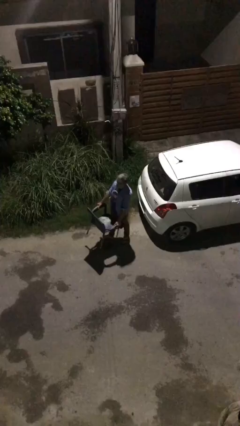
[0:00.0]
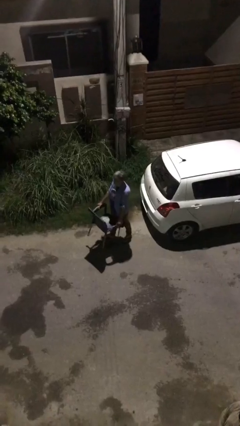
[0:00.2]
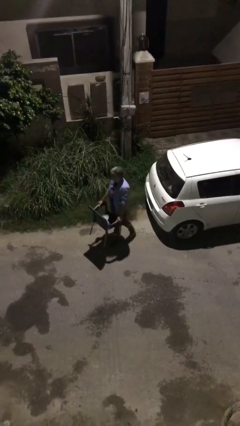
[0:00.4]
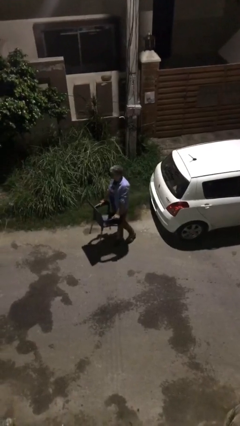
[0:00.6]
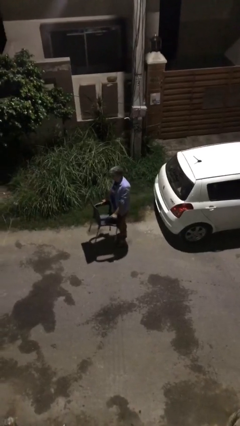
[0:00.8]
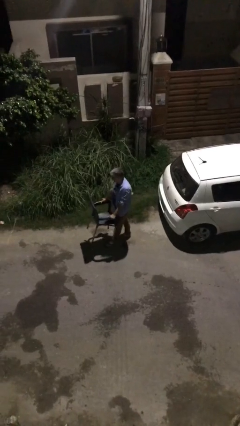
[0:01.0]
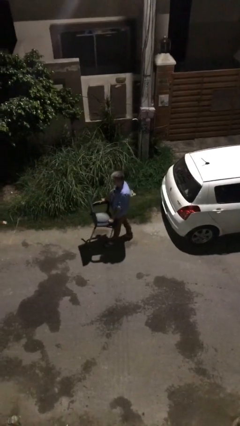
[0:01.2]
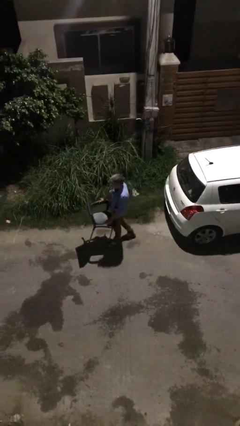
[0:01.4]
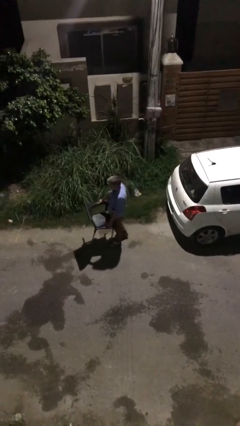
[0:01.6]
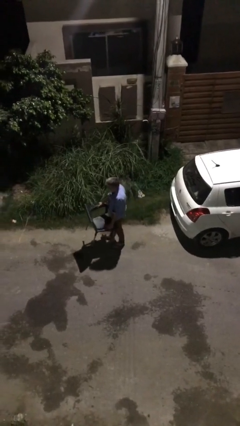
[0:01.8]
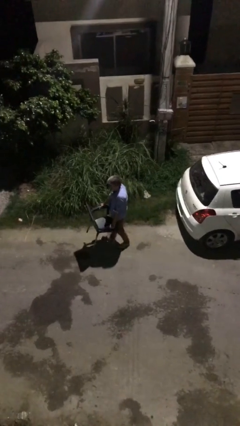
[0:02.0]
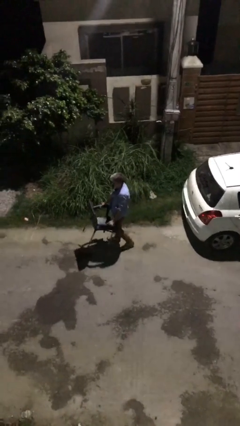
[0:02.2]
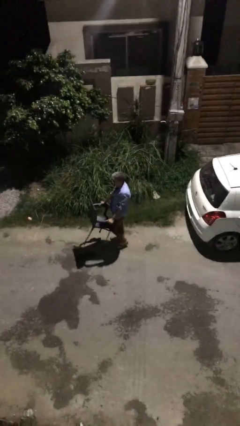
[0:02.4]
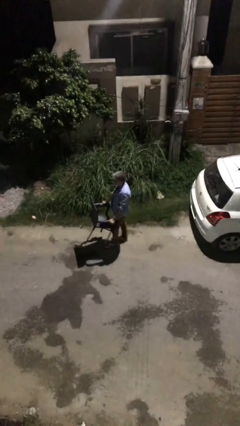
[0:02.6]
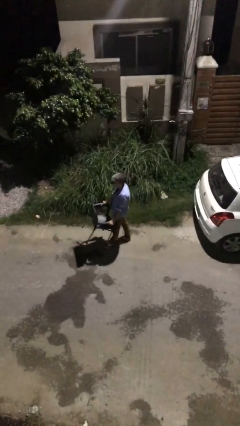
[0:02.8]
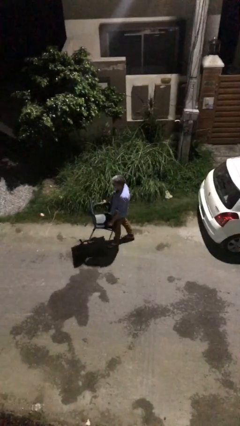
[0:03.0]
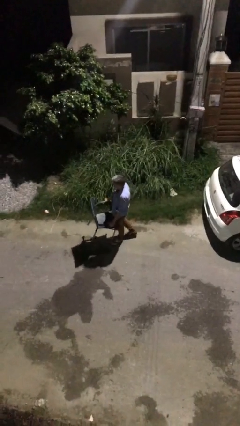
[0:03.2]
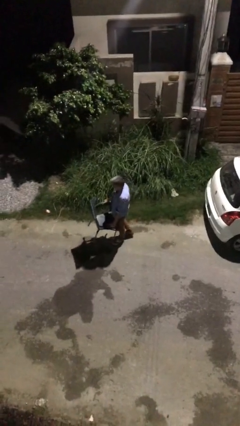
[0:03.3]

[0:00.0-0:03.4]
person carries heavy object

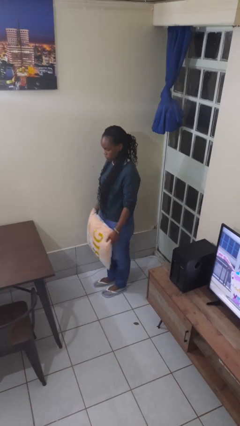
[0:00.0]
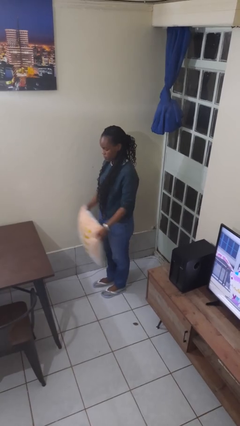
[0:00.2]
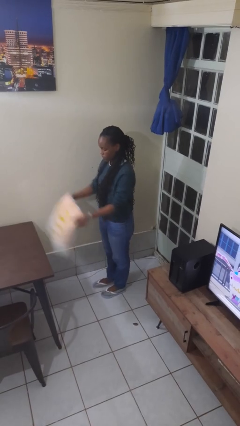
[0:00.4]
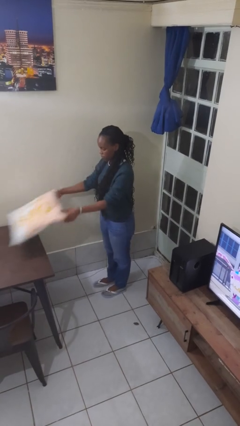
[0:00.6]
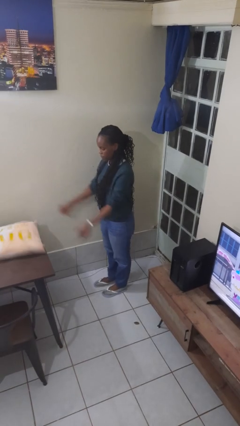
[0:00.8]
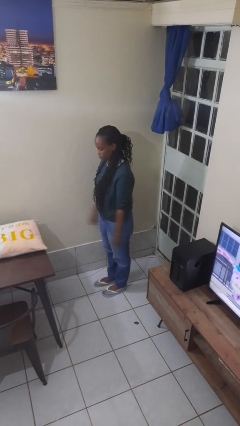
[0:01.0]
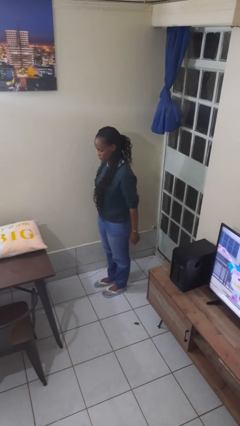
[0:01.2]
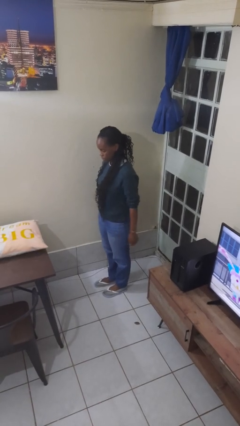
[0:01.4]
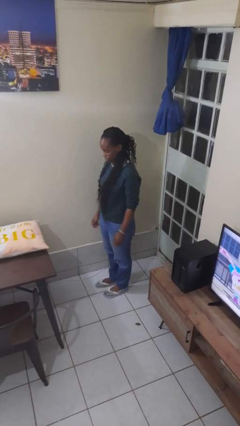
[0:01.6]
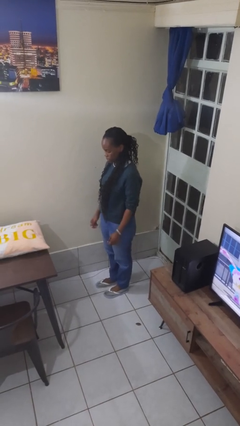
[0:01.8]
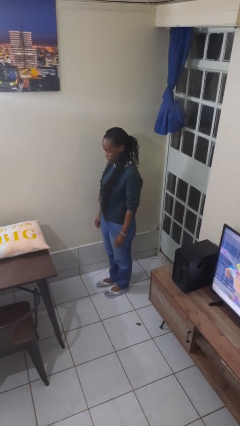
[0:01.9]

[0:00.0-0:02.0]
person throws object on table

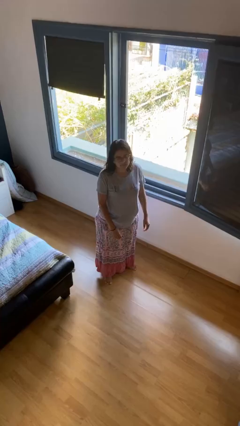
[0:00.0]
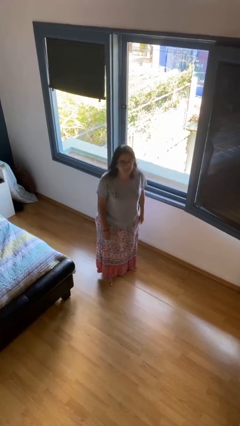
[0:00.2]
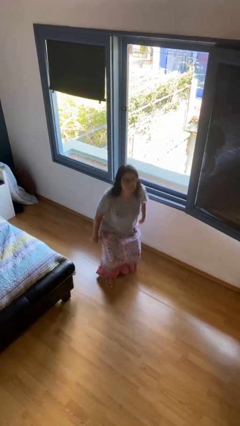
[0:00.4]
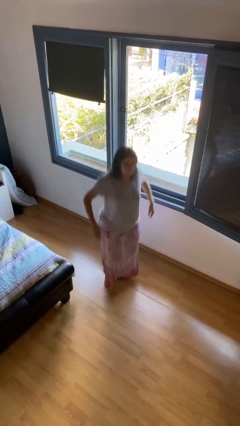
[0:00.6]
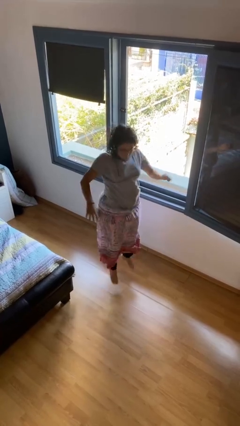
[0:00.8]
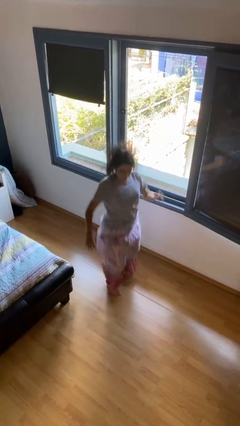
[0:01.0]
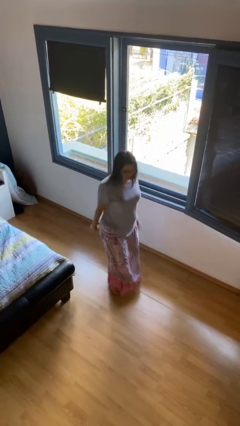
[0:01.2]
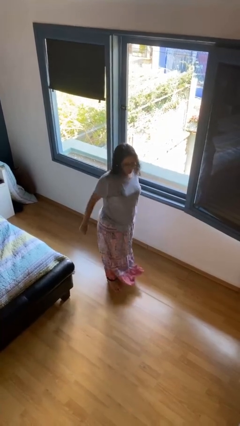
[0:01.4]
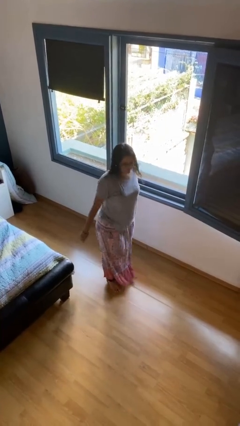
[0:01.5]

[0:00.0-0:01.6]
person jumps

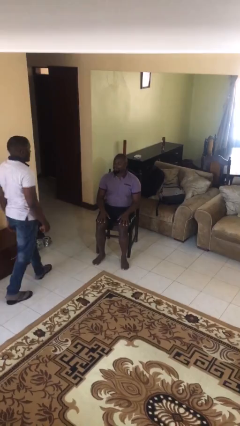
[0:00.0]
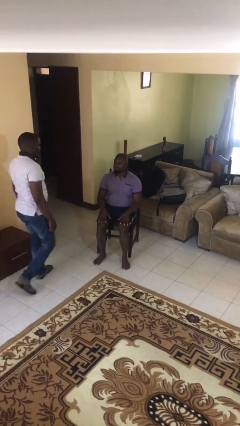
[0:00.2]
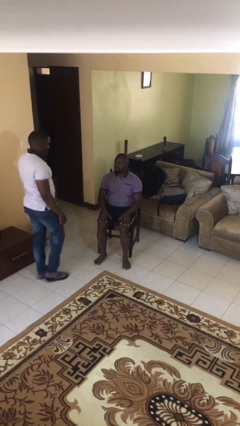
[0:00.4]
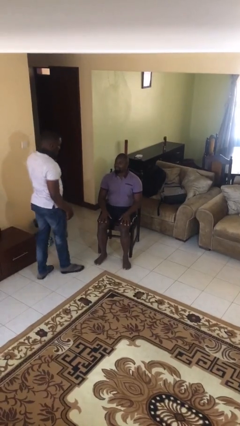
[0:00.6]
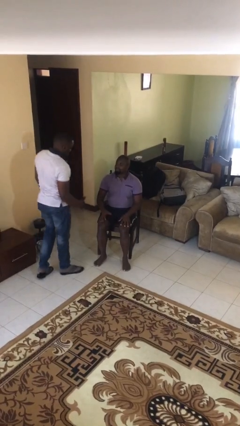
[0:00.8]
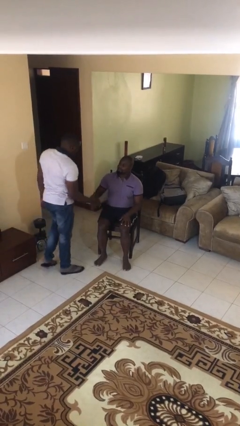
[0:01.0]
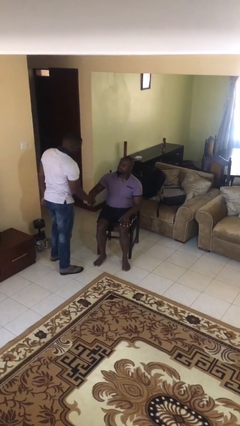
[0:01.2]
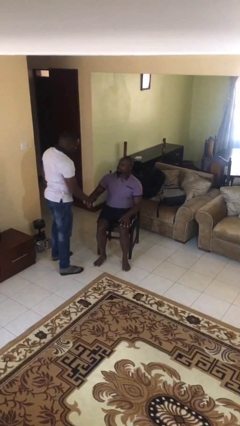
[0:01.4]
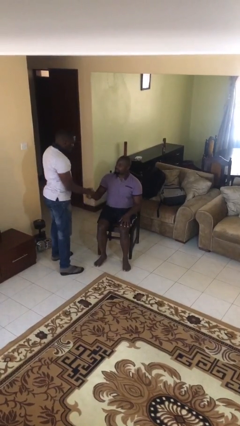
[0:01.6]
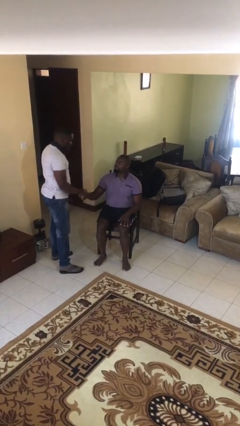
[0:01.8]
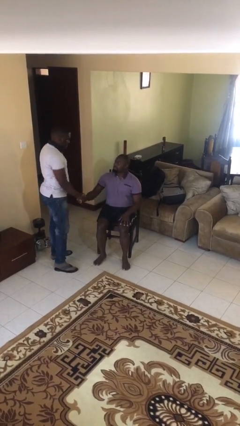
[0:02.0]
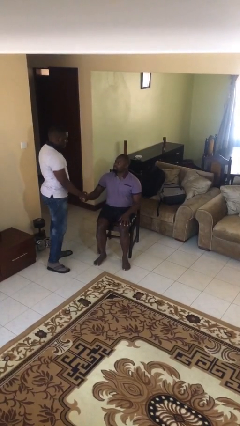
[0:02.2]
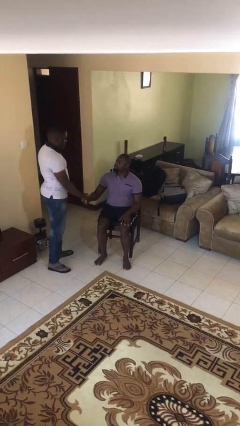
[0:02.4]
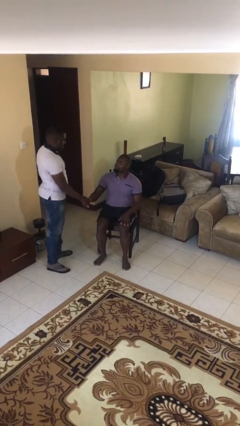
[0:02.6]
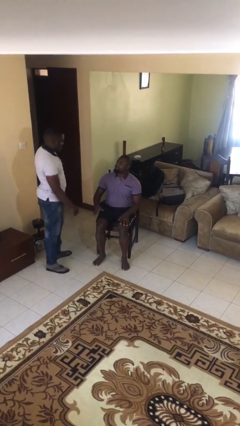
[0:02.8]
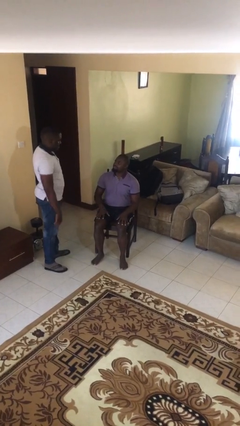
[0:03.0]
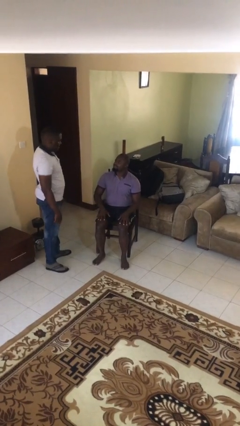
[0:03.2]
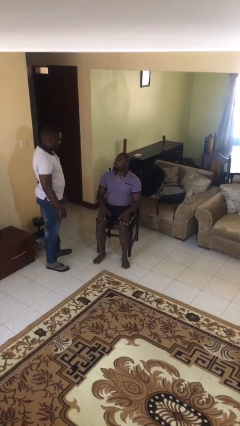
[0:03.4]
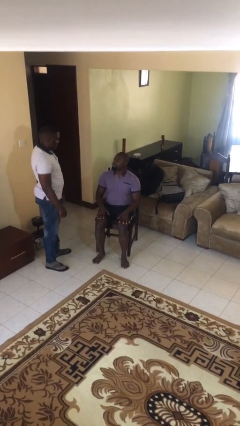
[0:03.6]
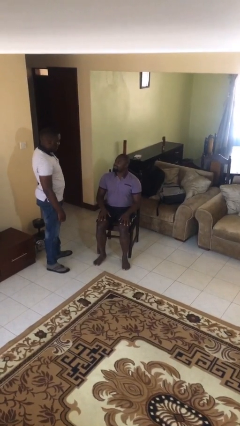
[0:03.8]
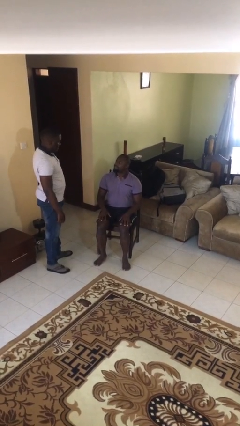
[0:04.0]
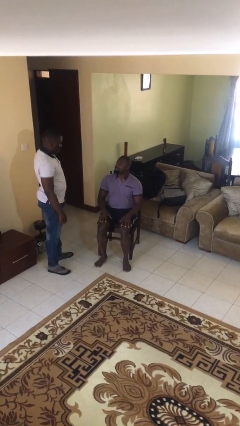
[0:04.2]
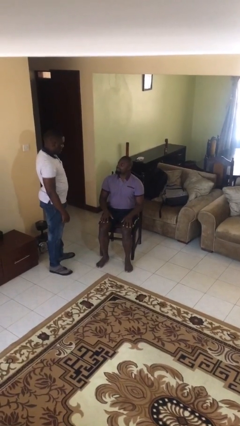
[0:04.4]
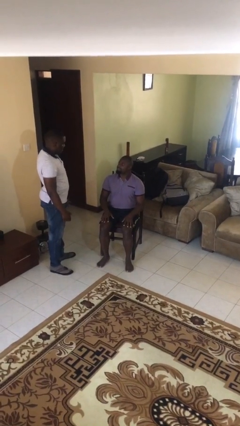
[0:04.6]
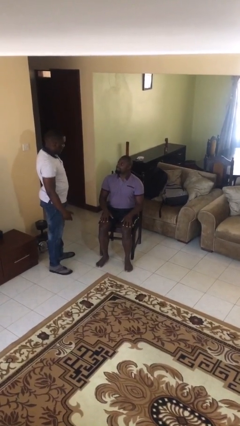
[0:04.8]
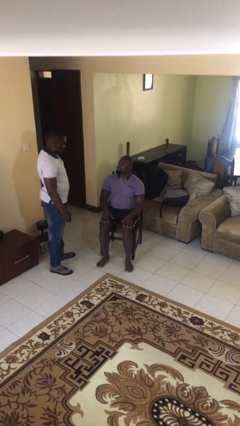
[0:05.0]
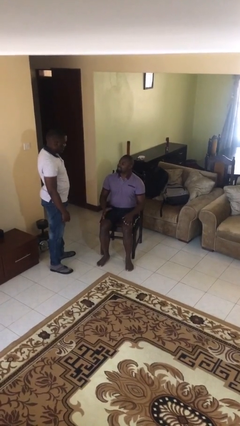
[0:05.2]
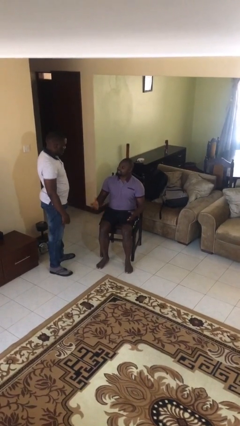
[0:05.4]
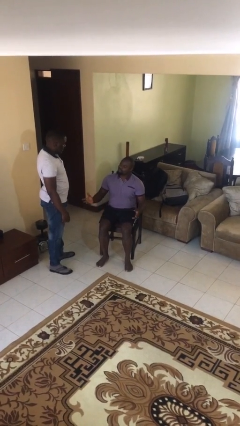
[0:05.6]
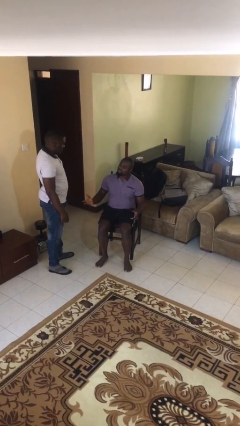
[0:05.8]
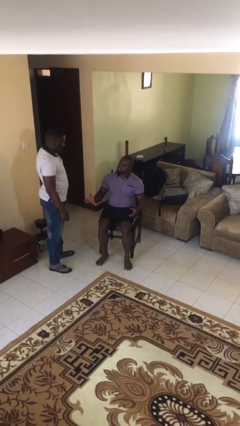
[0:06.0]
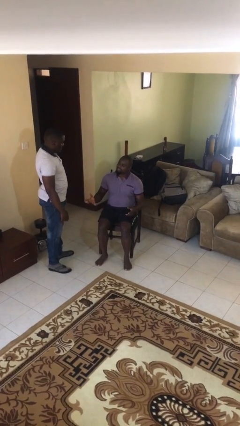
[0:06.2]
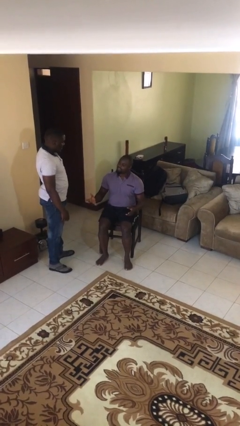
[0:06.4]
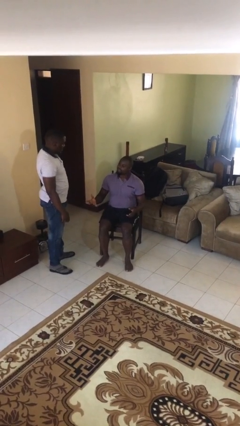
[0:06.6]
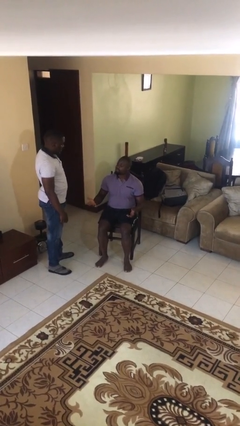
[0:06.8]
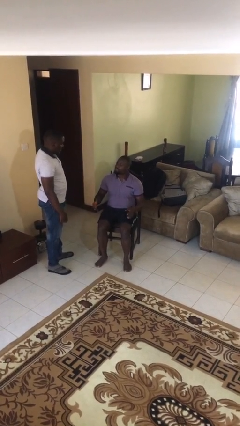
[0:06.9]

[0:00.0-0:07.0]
person shakes hand

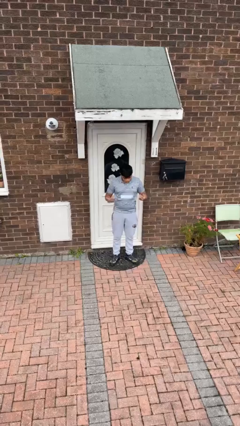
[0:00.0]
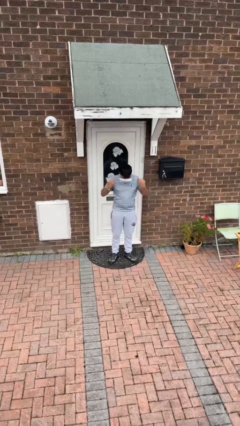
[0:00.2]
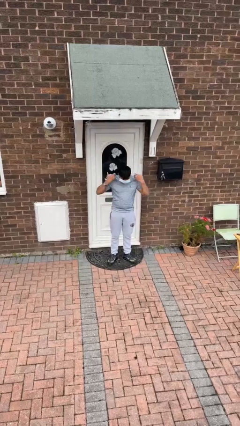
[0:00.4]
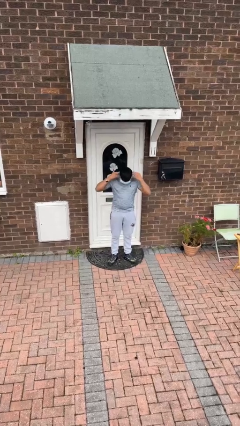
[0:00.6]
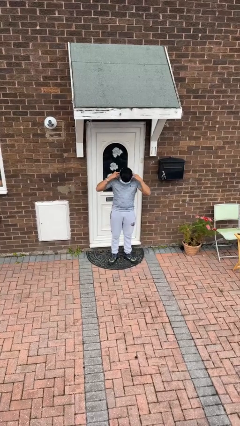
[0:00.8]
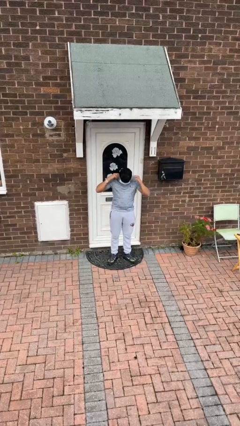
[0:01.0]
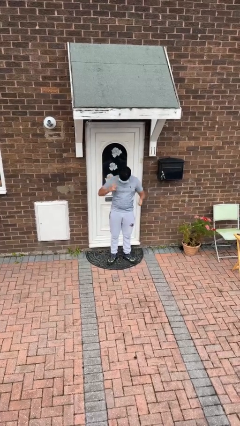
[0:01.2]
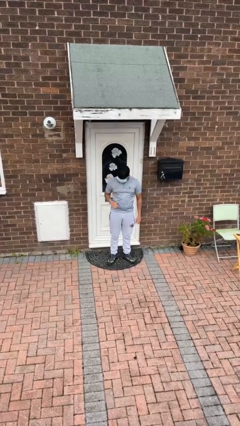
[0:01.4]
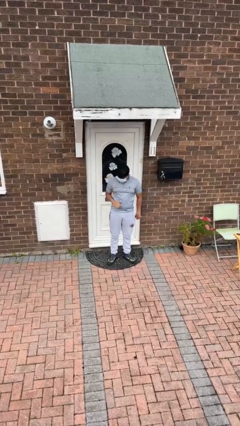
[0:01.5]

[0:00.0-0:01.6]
person puts on facemask

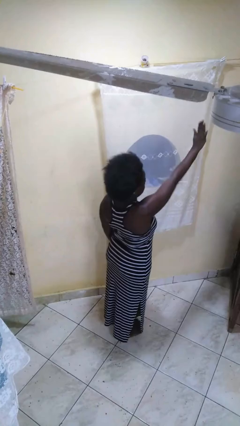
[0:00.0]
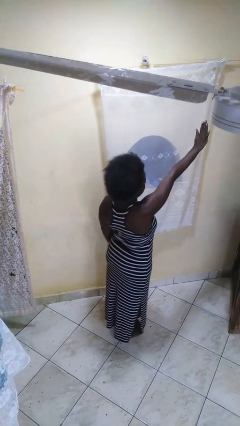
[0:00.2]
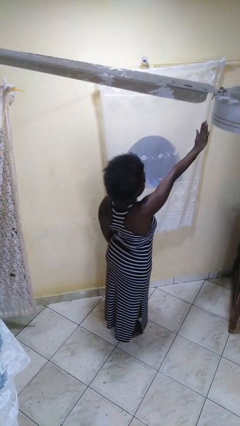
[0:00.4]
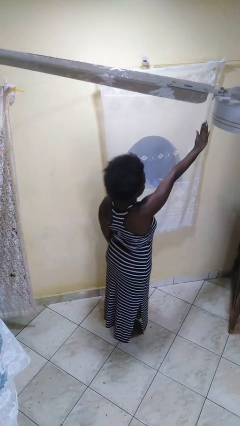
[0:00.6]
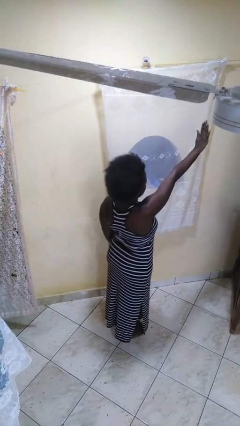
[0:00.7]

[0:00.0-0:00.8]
person gestures stop

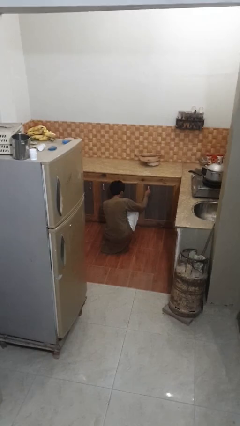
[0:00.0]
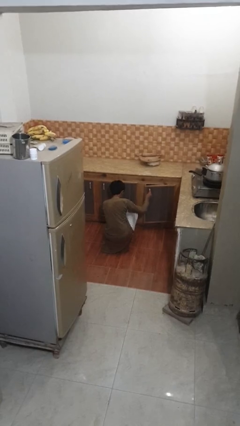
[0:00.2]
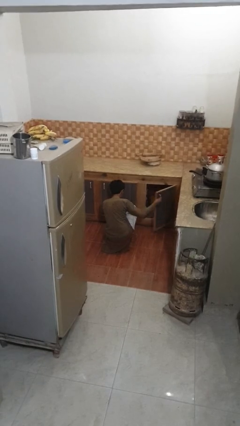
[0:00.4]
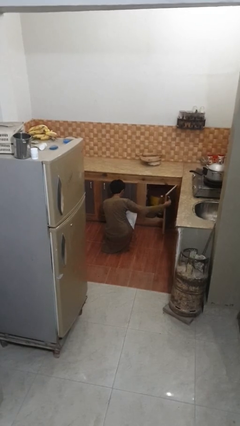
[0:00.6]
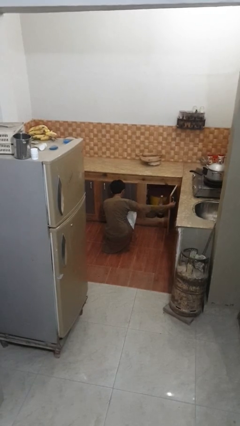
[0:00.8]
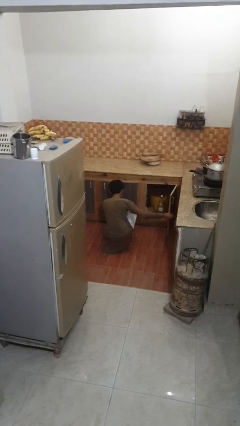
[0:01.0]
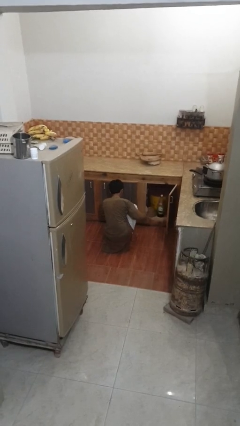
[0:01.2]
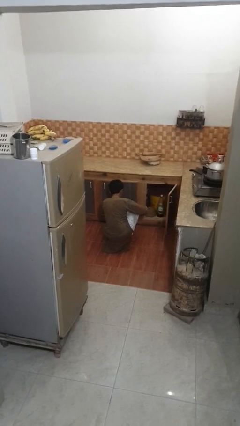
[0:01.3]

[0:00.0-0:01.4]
person opens kitchen drawer
